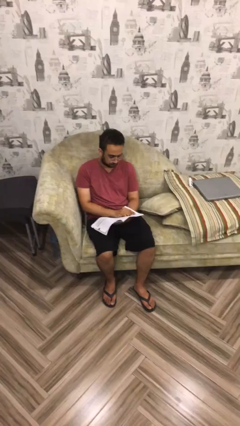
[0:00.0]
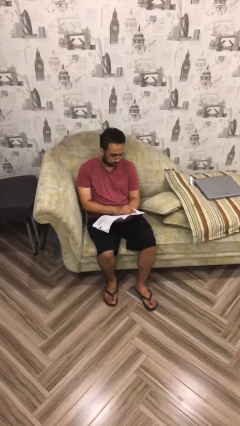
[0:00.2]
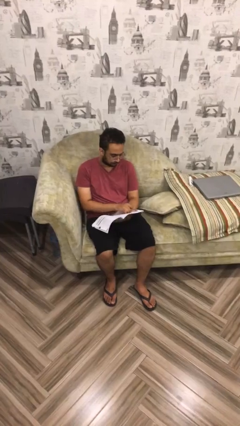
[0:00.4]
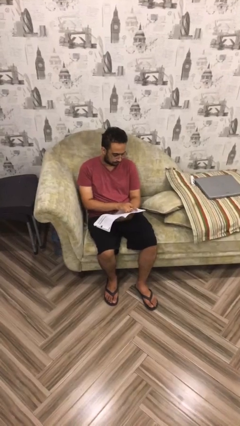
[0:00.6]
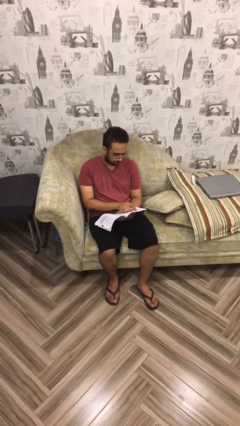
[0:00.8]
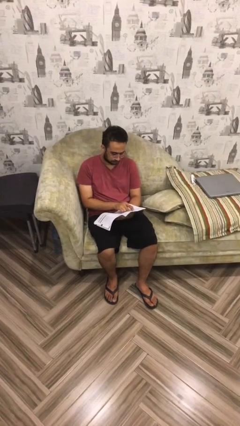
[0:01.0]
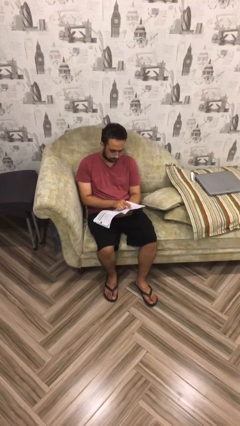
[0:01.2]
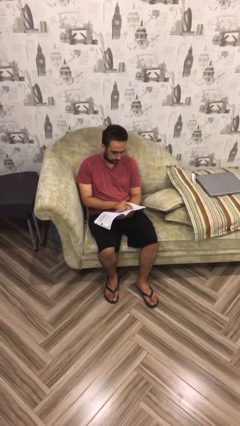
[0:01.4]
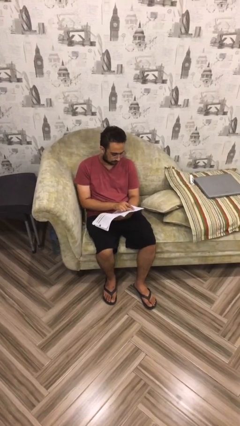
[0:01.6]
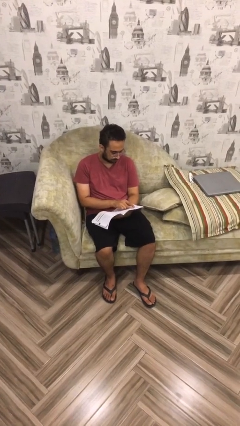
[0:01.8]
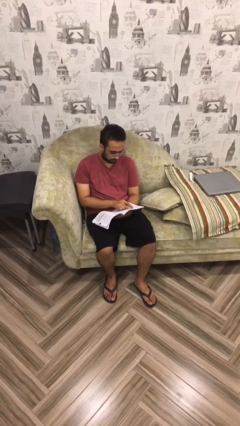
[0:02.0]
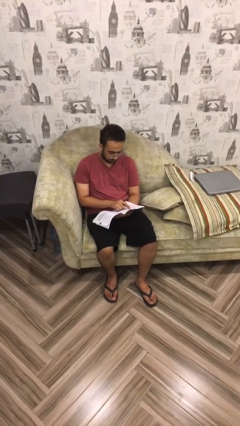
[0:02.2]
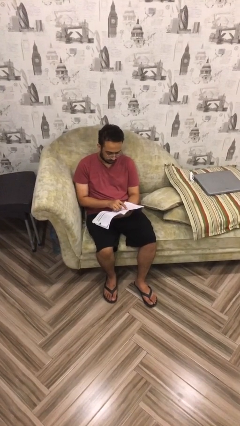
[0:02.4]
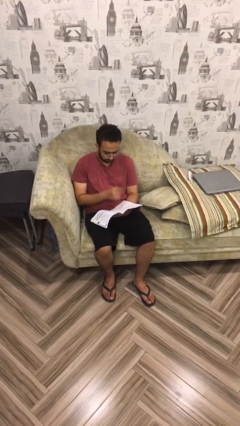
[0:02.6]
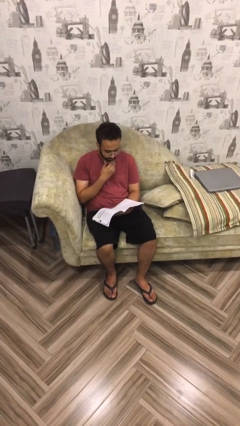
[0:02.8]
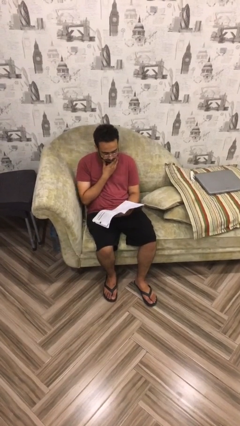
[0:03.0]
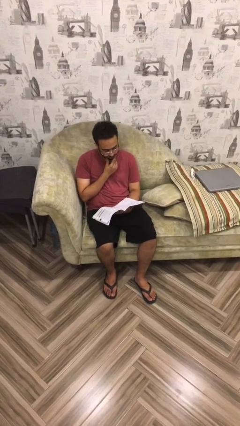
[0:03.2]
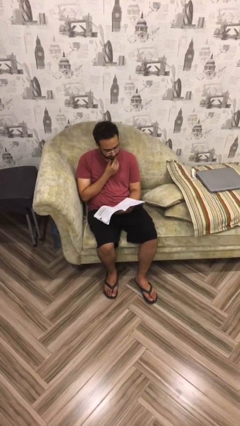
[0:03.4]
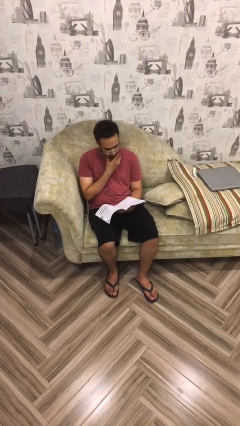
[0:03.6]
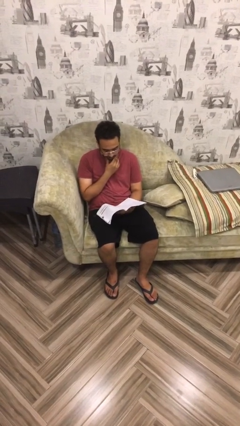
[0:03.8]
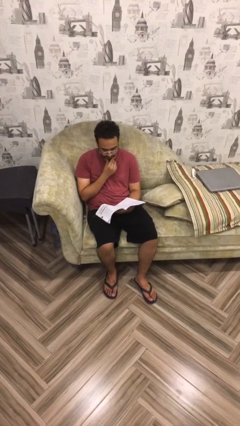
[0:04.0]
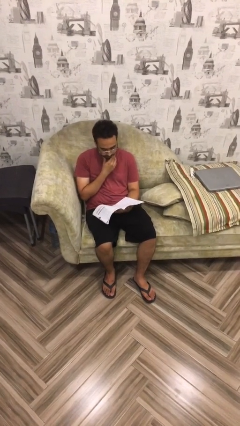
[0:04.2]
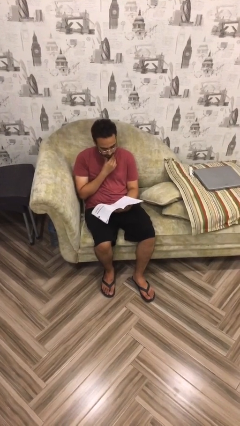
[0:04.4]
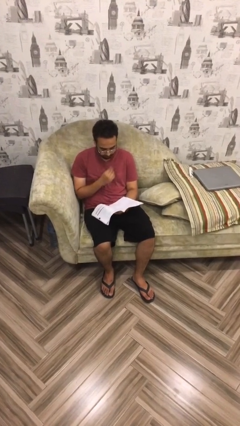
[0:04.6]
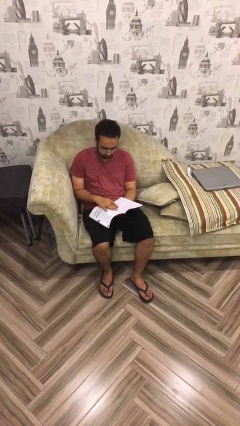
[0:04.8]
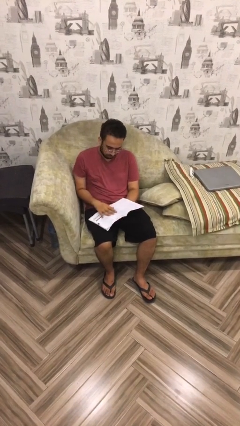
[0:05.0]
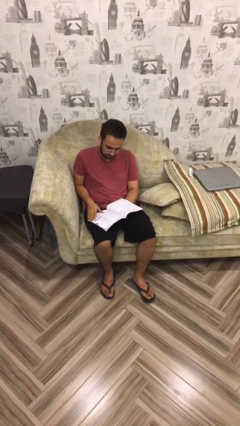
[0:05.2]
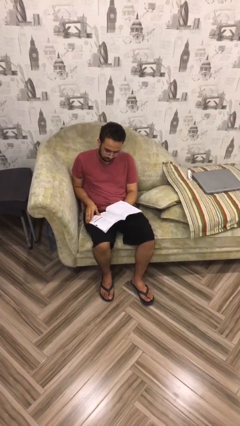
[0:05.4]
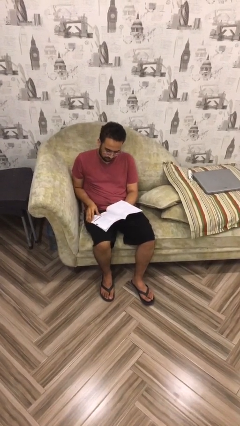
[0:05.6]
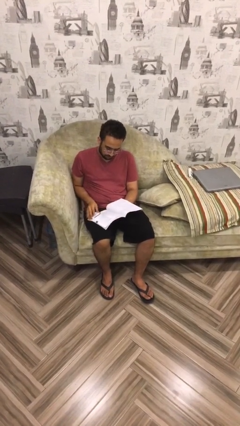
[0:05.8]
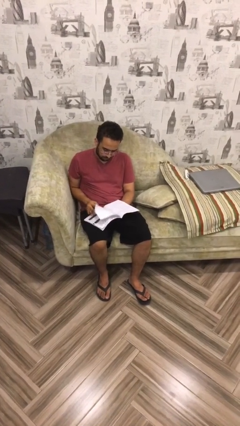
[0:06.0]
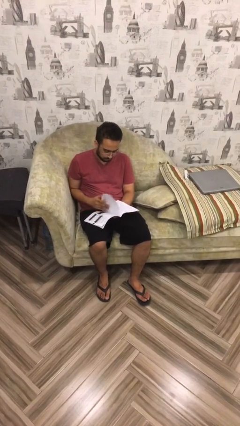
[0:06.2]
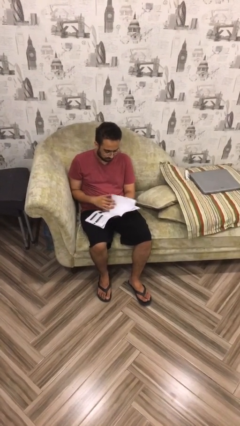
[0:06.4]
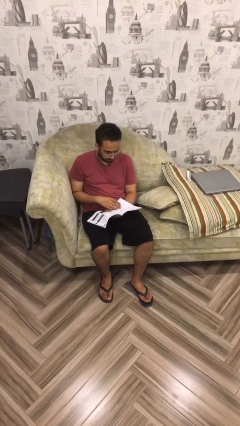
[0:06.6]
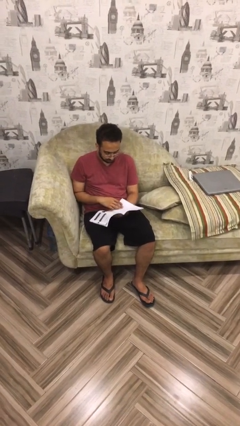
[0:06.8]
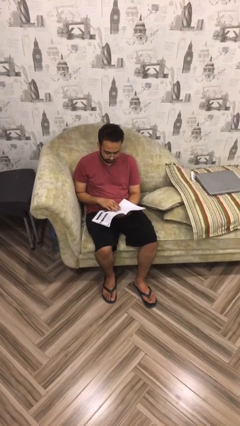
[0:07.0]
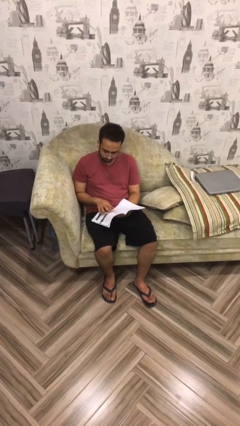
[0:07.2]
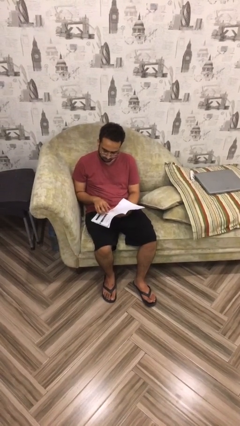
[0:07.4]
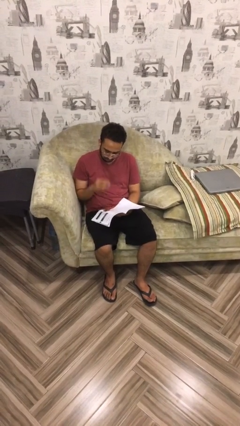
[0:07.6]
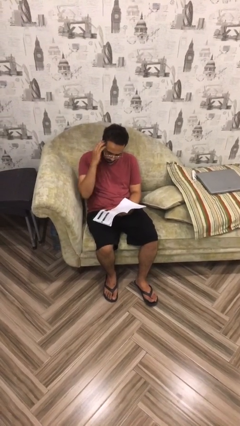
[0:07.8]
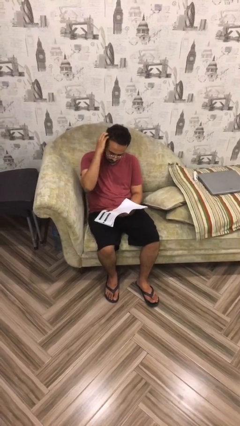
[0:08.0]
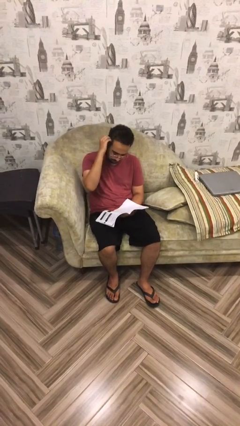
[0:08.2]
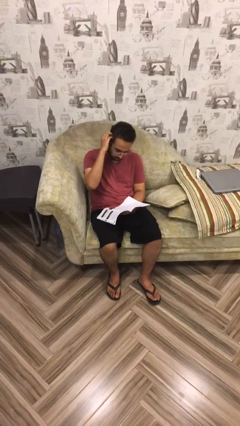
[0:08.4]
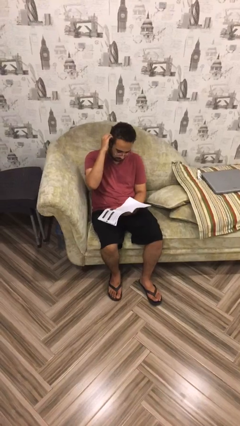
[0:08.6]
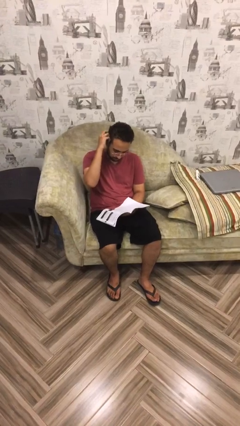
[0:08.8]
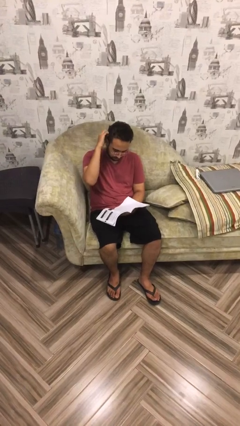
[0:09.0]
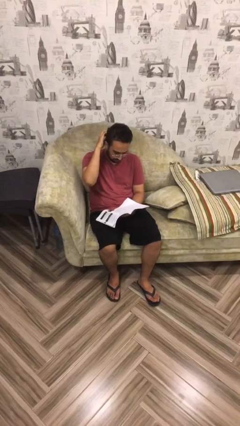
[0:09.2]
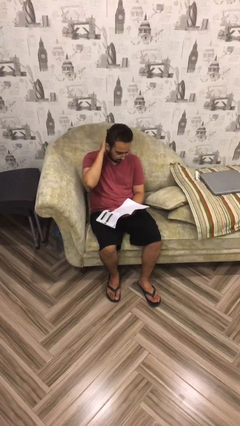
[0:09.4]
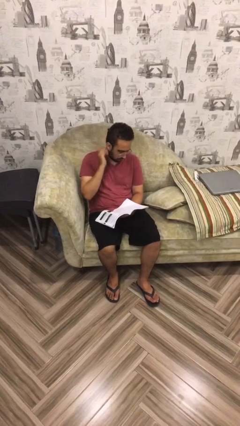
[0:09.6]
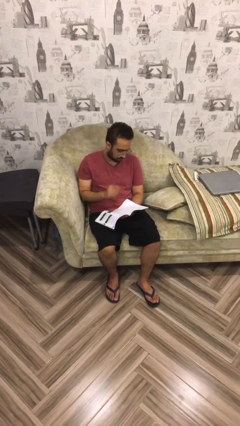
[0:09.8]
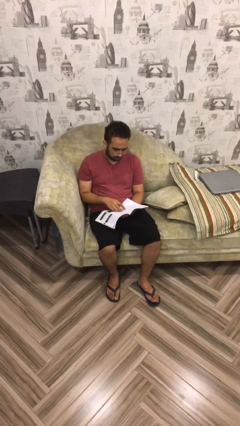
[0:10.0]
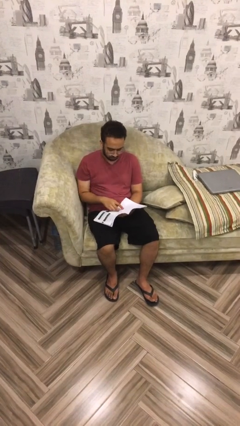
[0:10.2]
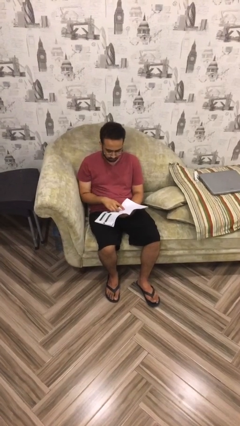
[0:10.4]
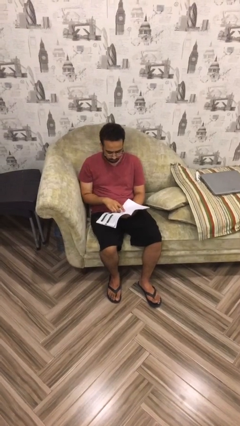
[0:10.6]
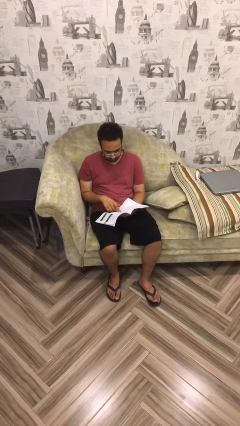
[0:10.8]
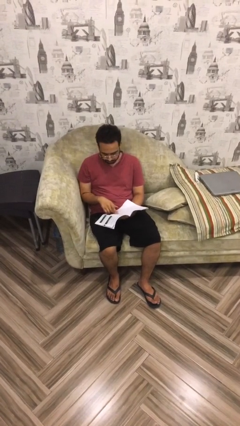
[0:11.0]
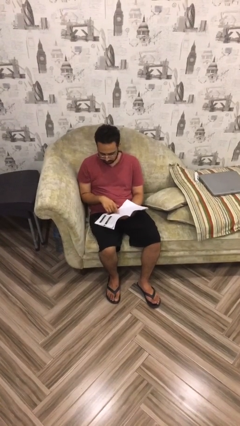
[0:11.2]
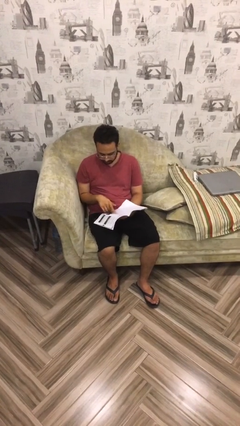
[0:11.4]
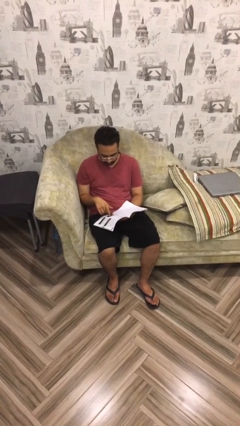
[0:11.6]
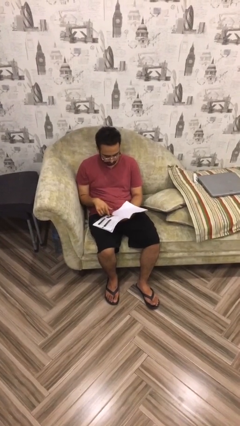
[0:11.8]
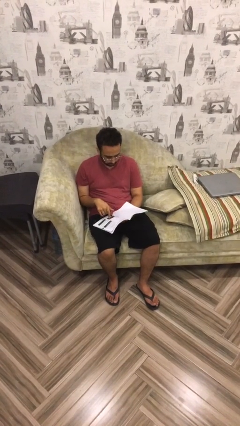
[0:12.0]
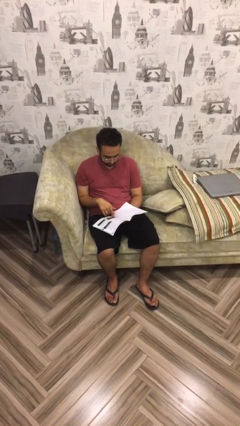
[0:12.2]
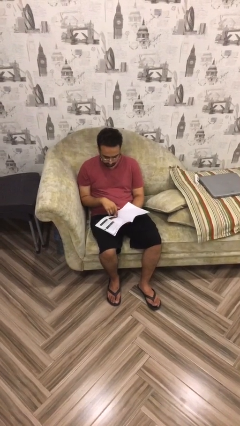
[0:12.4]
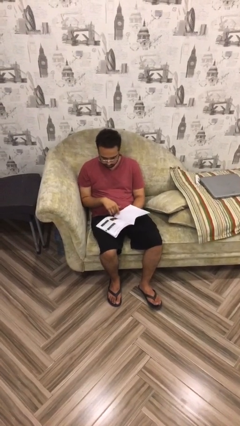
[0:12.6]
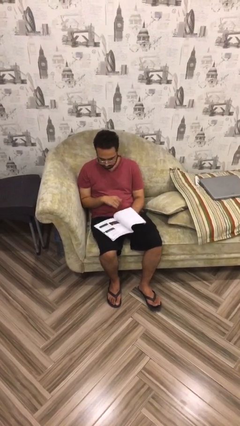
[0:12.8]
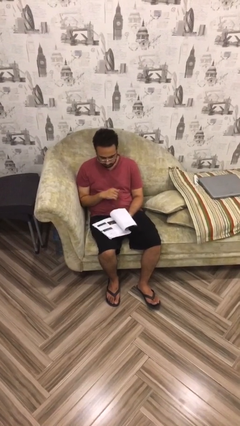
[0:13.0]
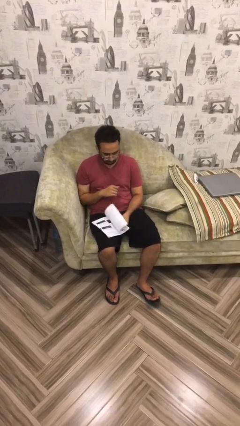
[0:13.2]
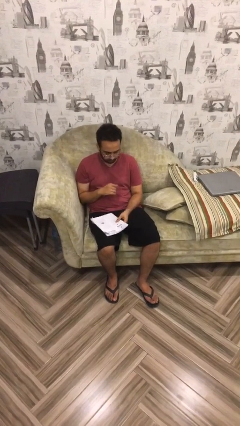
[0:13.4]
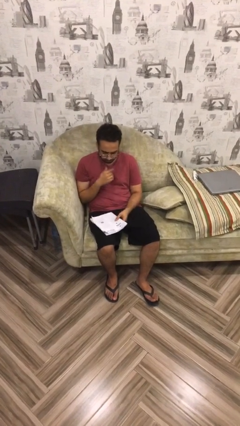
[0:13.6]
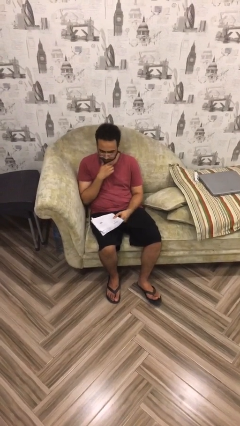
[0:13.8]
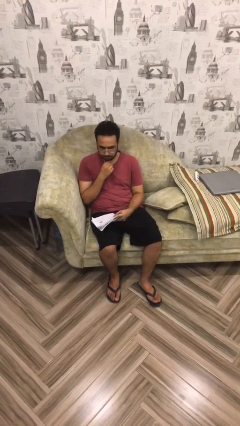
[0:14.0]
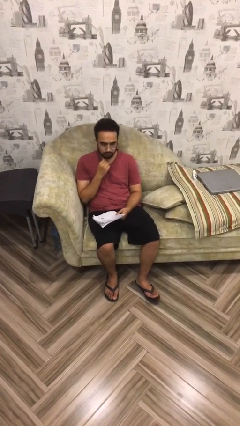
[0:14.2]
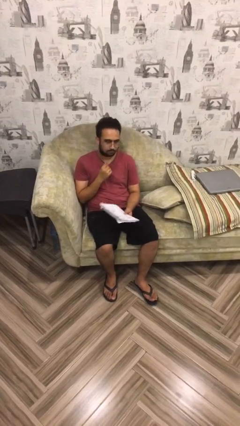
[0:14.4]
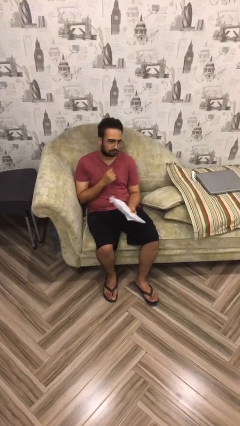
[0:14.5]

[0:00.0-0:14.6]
person reads document

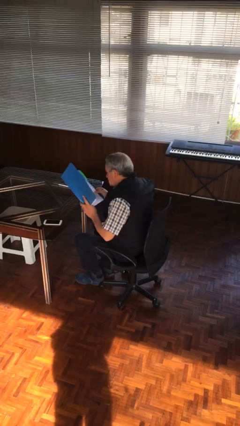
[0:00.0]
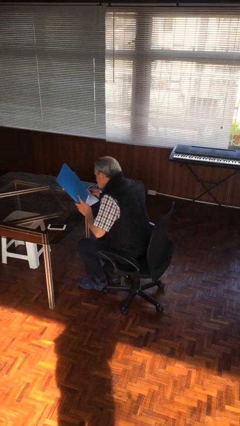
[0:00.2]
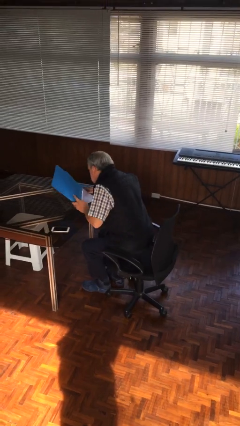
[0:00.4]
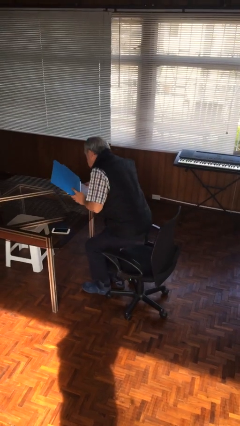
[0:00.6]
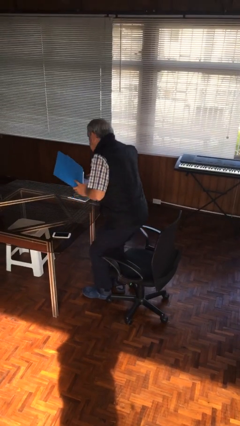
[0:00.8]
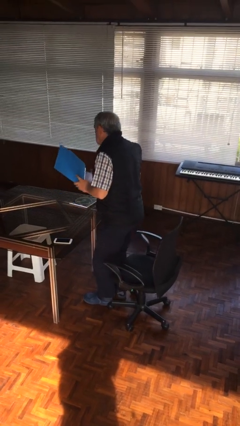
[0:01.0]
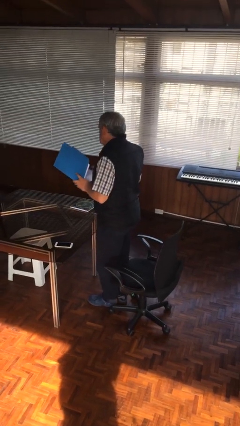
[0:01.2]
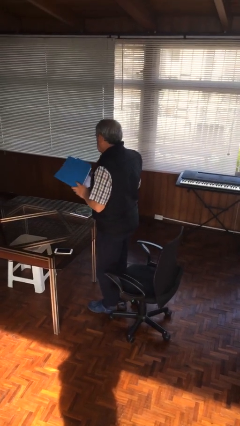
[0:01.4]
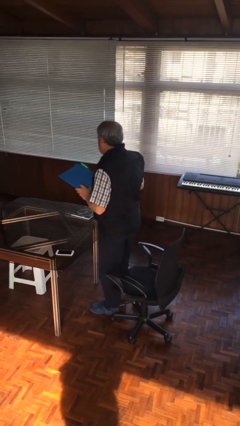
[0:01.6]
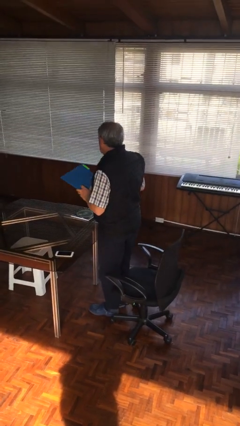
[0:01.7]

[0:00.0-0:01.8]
person stands up

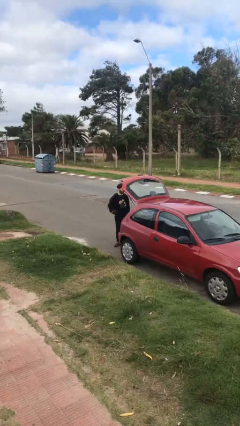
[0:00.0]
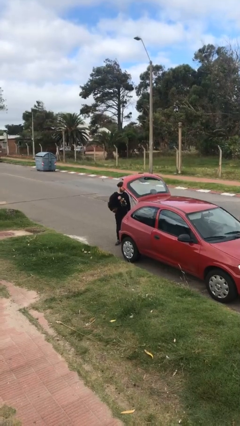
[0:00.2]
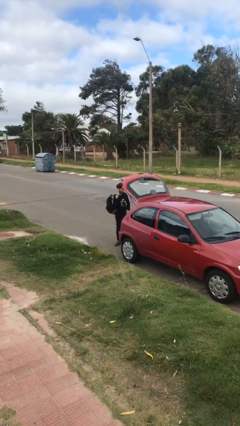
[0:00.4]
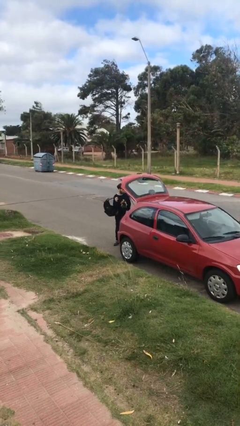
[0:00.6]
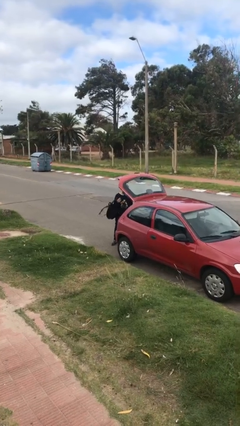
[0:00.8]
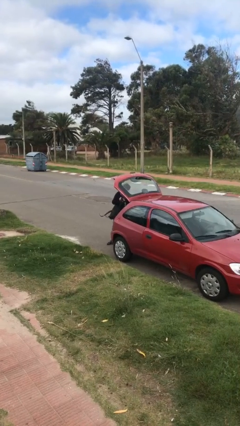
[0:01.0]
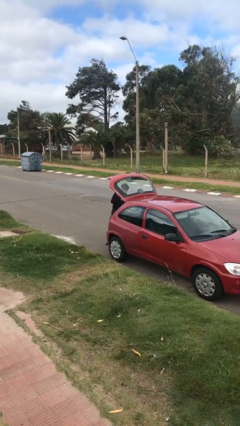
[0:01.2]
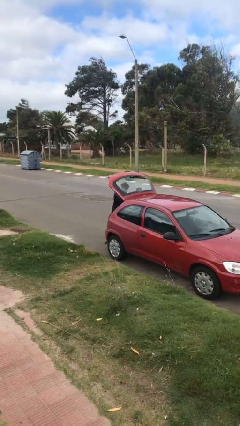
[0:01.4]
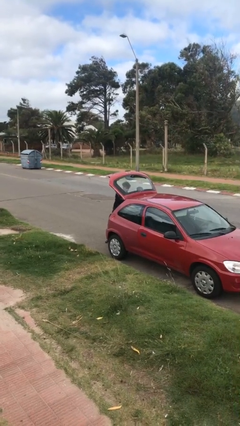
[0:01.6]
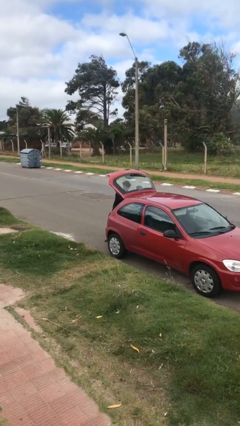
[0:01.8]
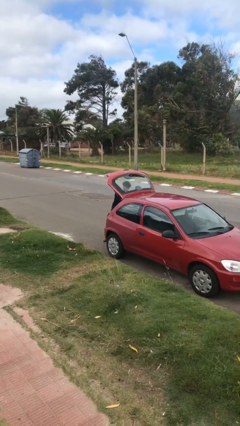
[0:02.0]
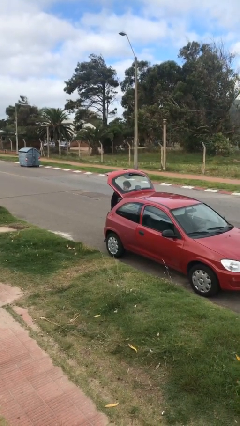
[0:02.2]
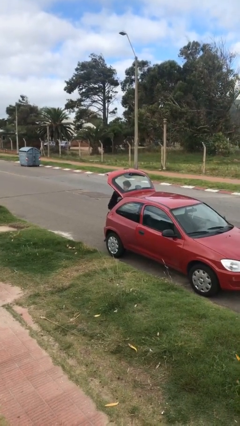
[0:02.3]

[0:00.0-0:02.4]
person loads car
